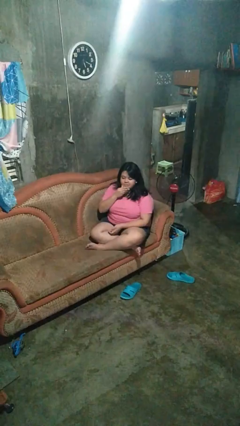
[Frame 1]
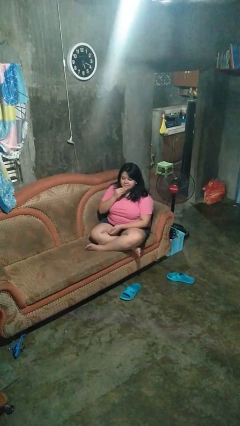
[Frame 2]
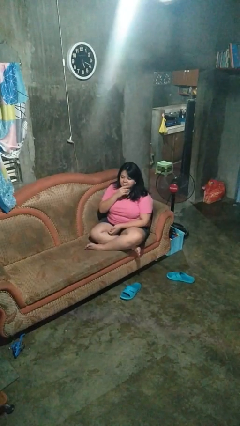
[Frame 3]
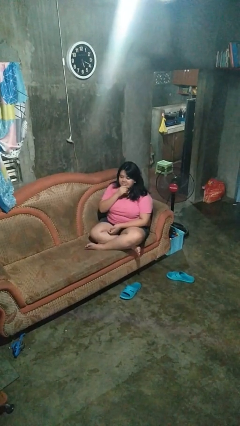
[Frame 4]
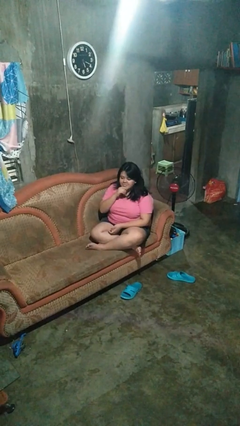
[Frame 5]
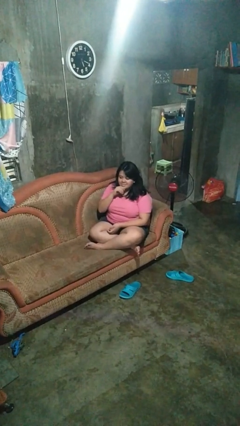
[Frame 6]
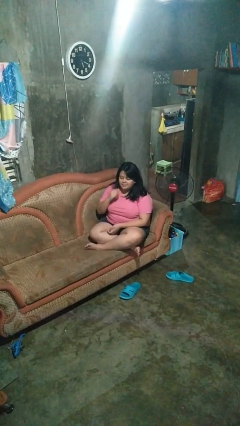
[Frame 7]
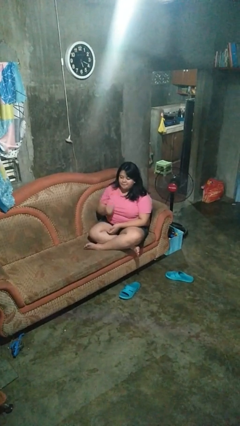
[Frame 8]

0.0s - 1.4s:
person strokes chin

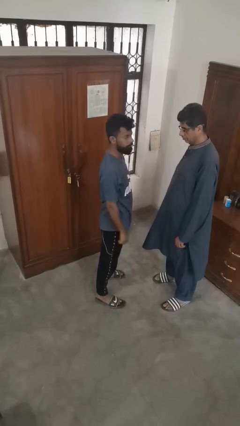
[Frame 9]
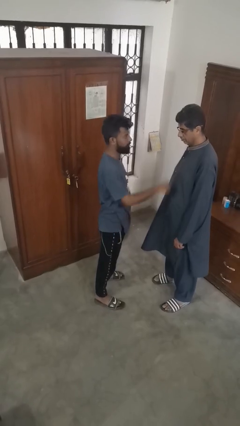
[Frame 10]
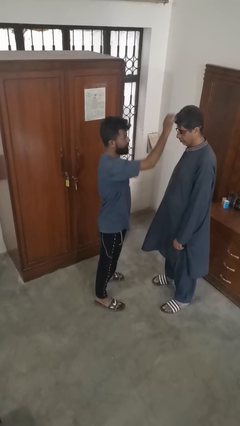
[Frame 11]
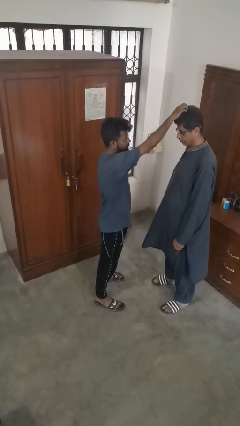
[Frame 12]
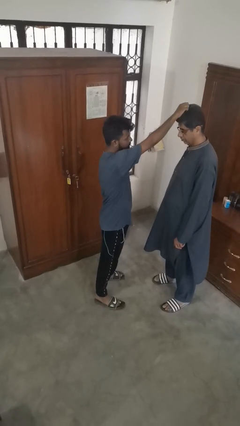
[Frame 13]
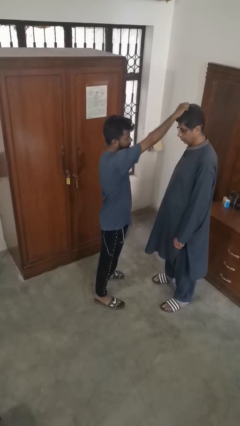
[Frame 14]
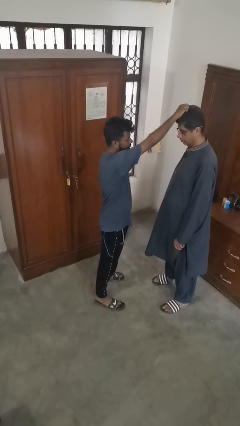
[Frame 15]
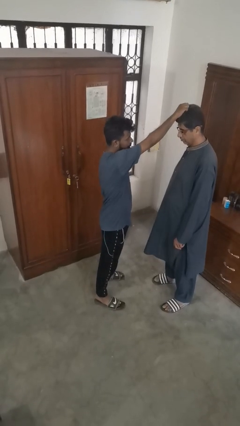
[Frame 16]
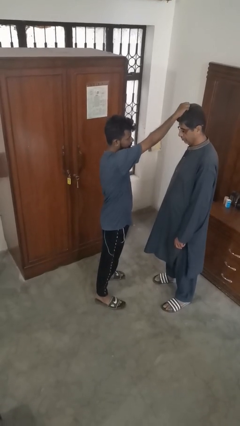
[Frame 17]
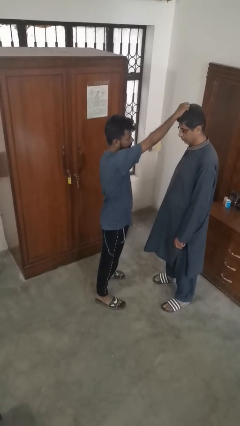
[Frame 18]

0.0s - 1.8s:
person grabs person by hair

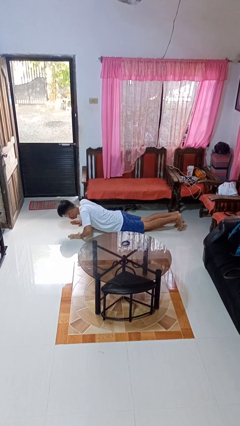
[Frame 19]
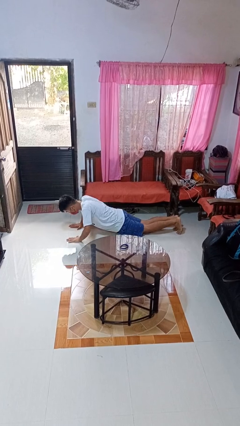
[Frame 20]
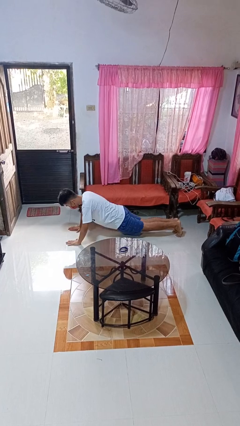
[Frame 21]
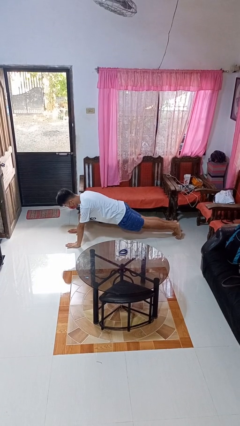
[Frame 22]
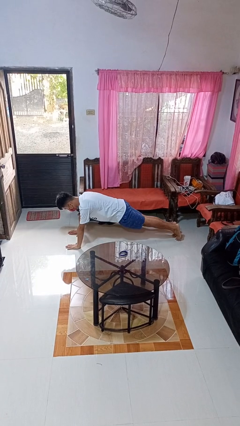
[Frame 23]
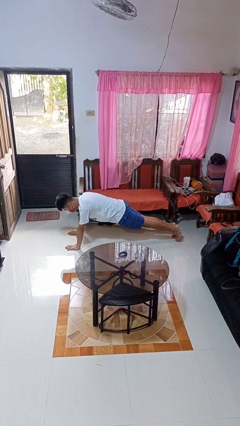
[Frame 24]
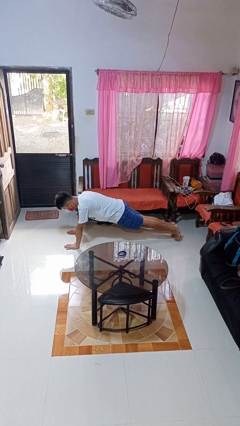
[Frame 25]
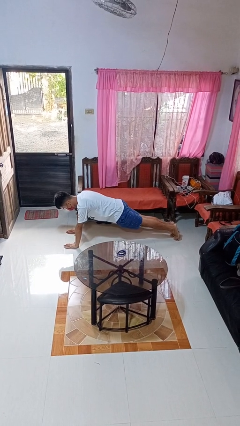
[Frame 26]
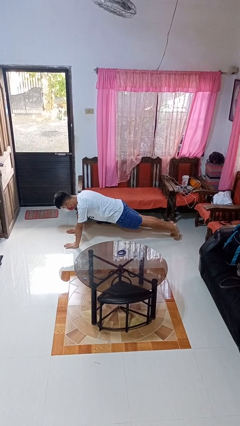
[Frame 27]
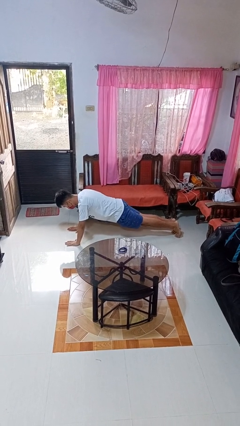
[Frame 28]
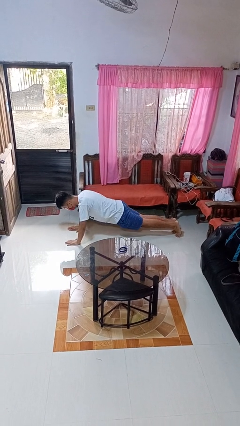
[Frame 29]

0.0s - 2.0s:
person exercises with pushup

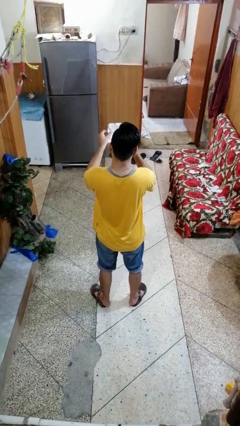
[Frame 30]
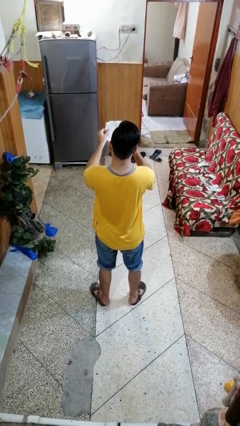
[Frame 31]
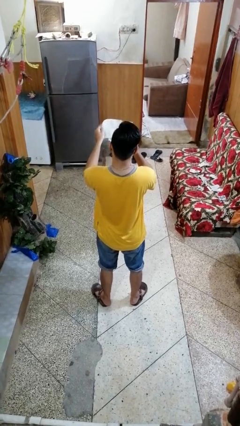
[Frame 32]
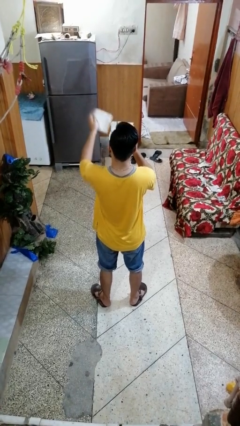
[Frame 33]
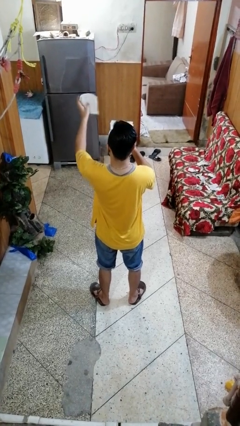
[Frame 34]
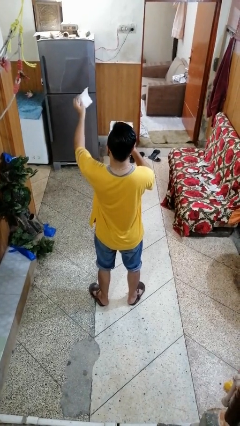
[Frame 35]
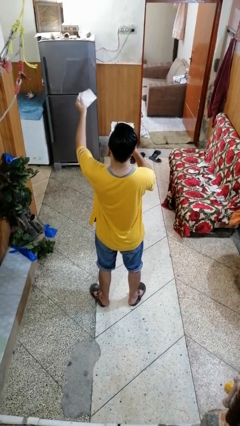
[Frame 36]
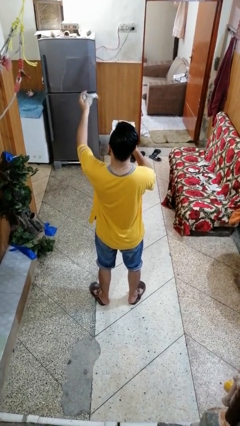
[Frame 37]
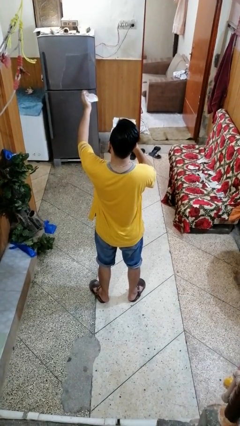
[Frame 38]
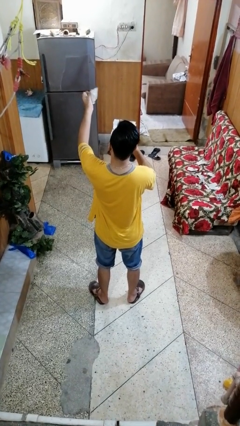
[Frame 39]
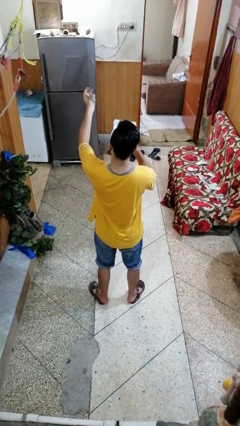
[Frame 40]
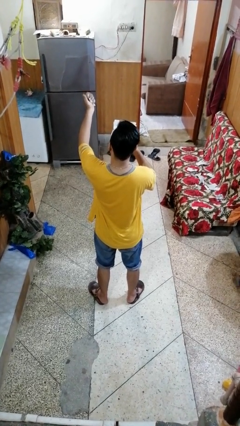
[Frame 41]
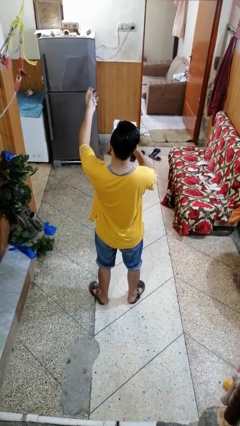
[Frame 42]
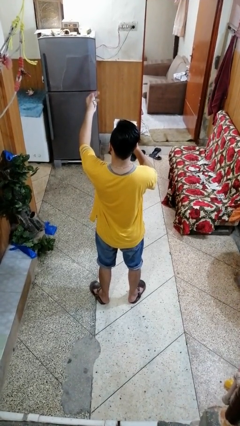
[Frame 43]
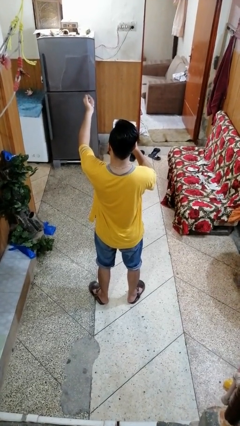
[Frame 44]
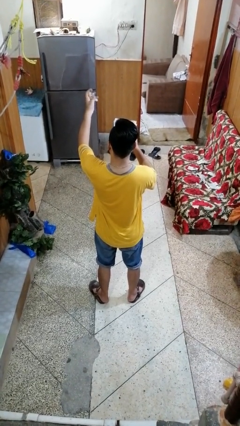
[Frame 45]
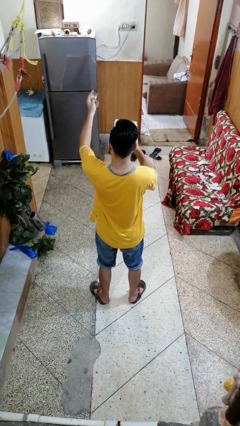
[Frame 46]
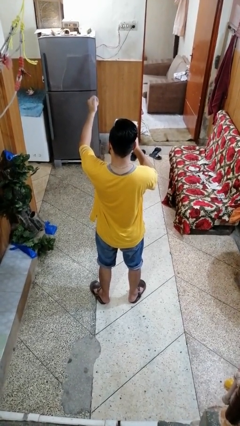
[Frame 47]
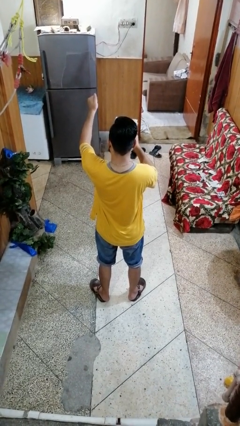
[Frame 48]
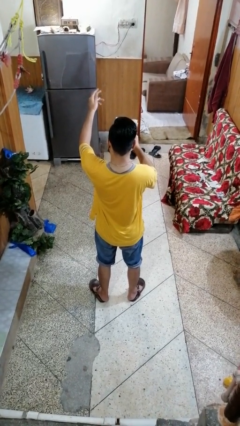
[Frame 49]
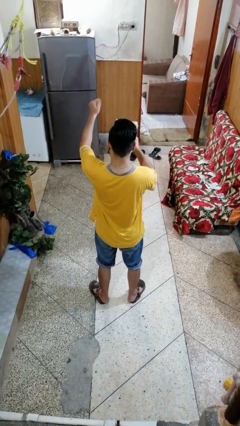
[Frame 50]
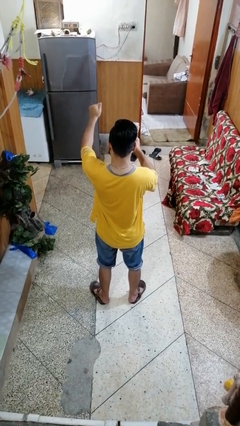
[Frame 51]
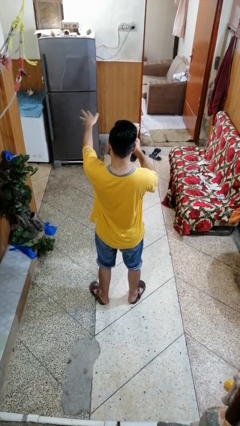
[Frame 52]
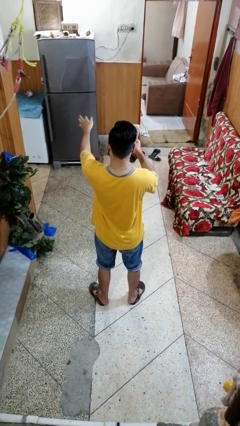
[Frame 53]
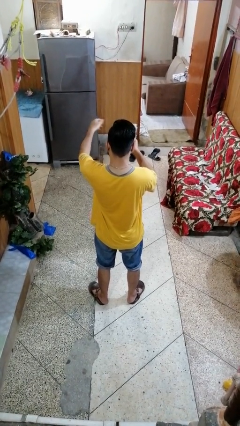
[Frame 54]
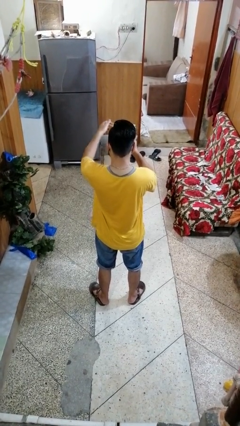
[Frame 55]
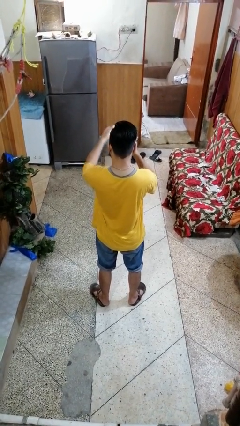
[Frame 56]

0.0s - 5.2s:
person crumples paper

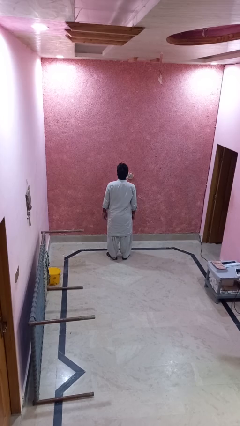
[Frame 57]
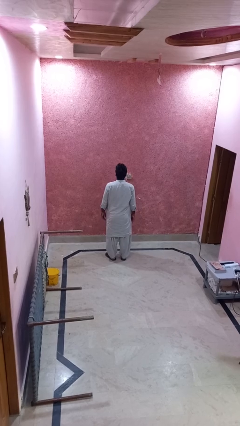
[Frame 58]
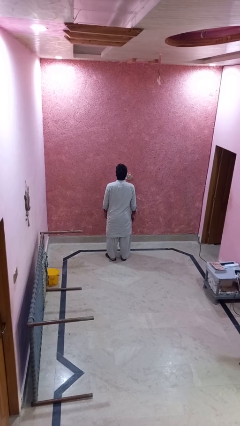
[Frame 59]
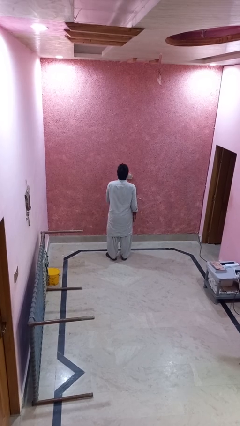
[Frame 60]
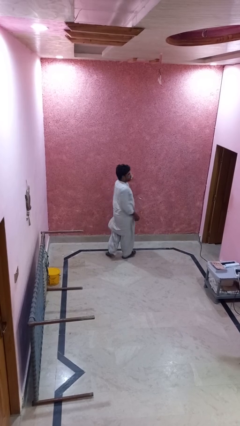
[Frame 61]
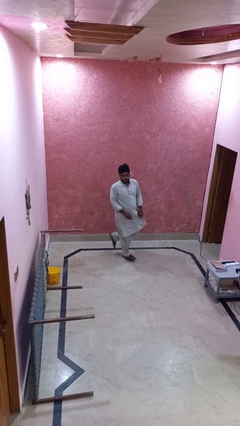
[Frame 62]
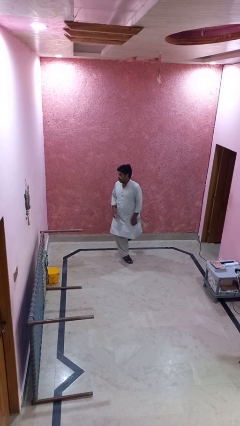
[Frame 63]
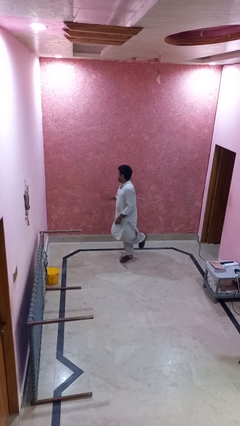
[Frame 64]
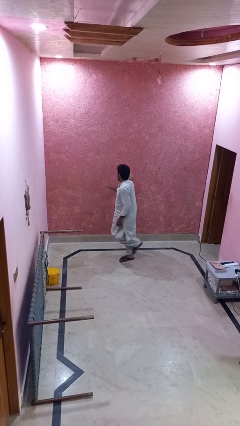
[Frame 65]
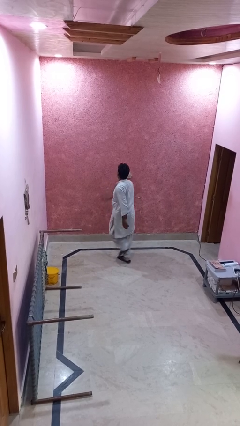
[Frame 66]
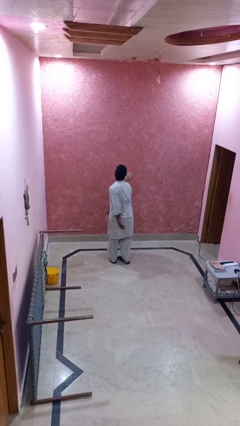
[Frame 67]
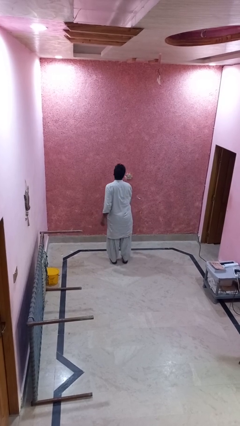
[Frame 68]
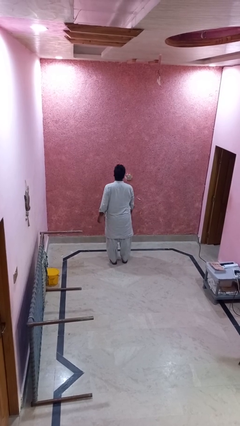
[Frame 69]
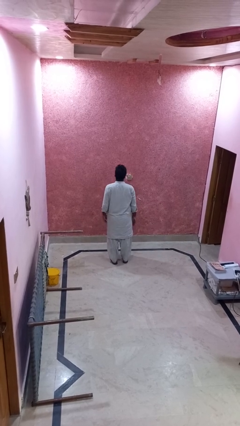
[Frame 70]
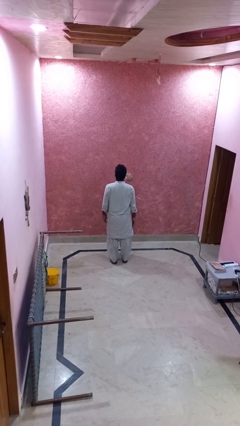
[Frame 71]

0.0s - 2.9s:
person twirls

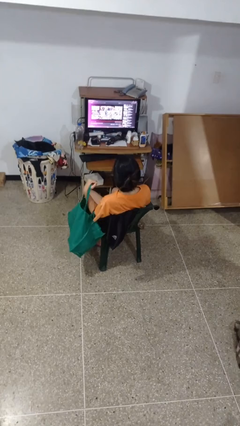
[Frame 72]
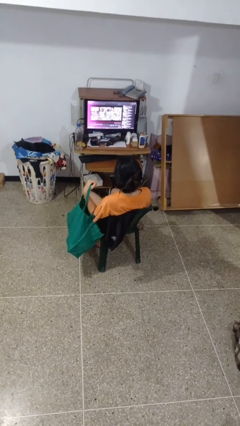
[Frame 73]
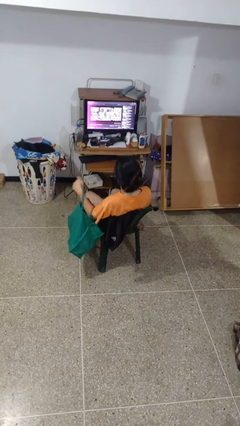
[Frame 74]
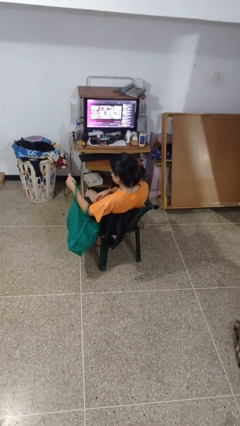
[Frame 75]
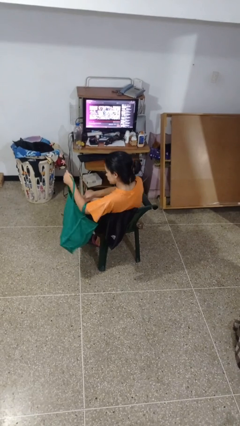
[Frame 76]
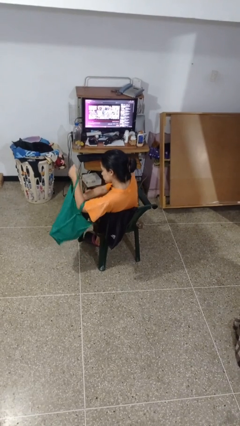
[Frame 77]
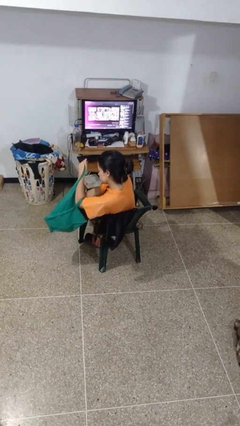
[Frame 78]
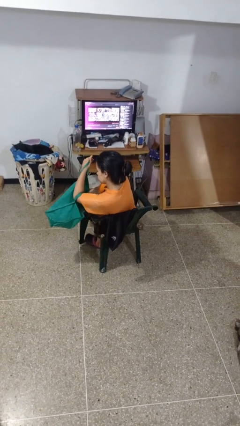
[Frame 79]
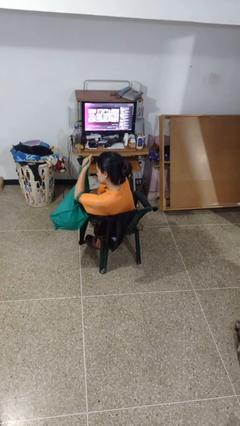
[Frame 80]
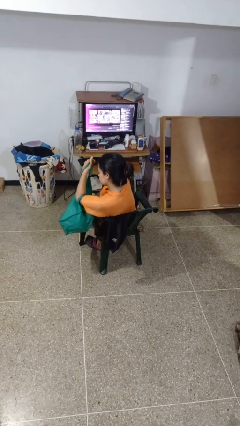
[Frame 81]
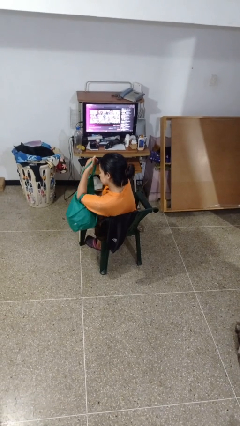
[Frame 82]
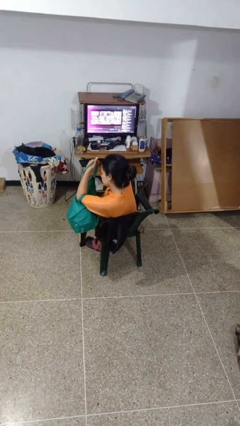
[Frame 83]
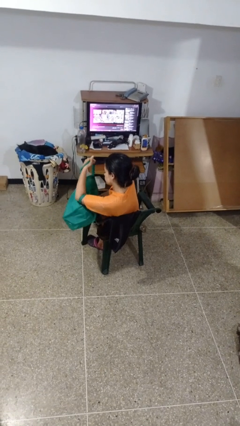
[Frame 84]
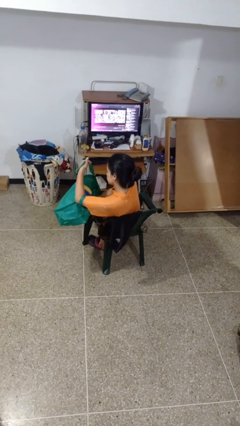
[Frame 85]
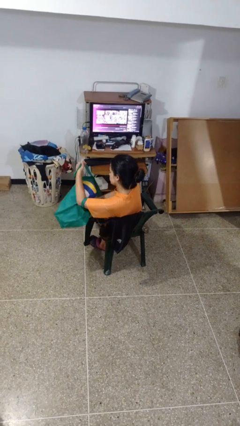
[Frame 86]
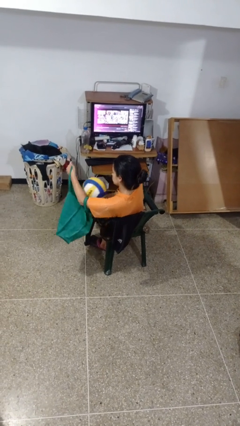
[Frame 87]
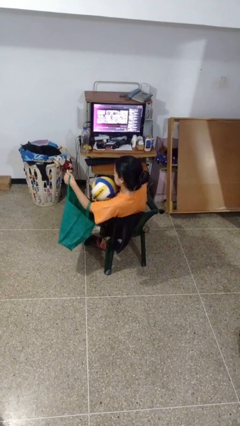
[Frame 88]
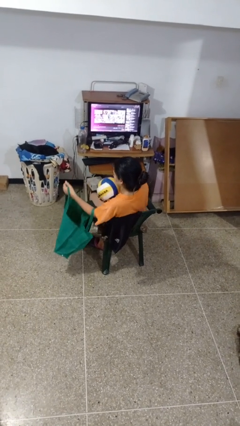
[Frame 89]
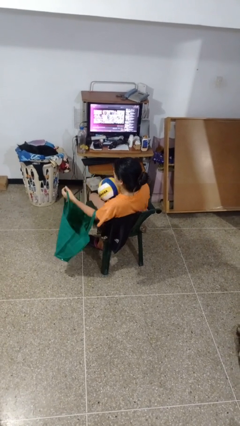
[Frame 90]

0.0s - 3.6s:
person takes object from bag

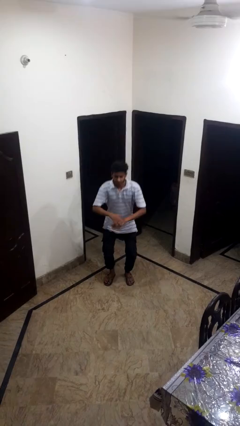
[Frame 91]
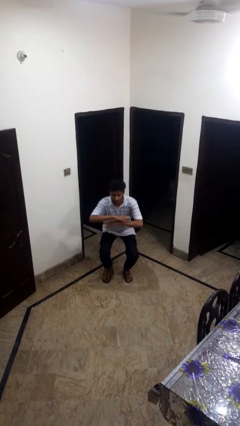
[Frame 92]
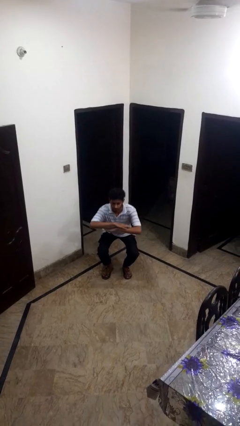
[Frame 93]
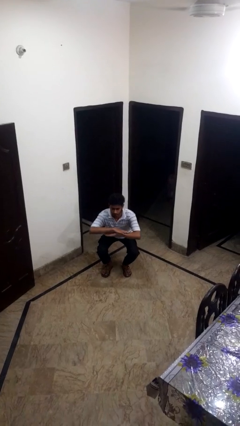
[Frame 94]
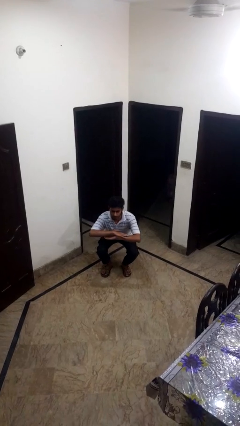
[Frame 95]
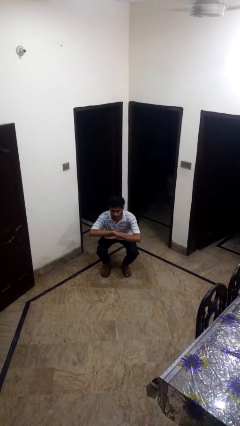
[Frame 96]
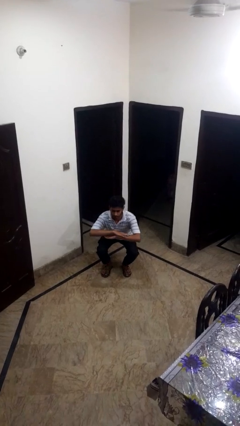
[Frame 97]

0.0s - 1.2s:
person squats
